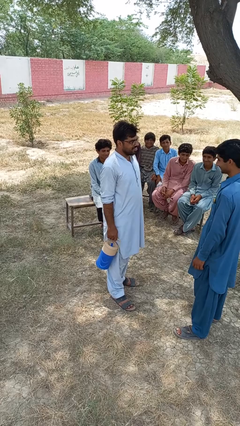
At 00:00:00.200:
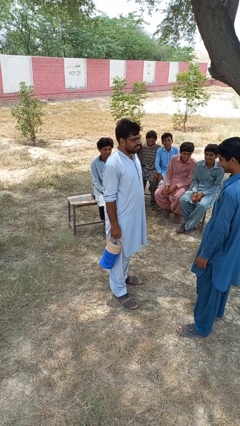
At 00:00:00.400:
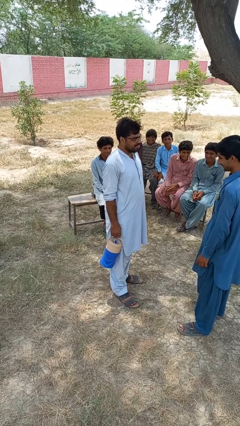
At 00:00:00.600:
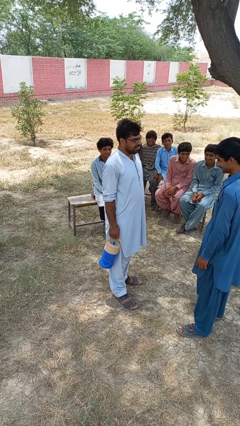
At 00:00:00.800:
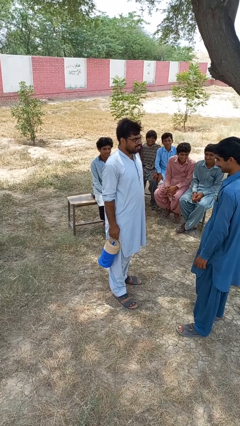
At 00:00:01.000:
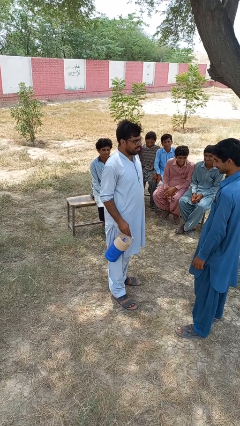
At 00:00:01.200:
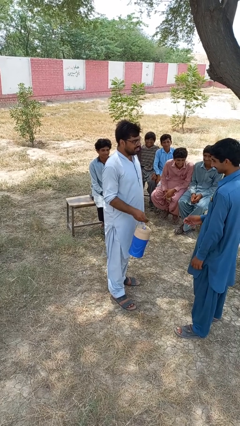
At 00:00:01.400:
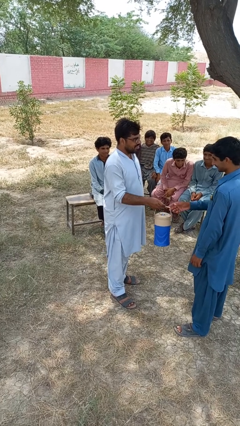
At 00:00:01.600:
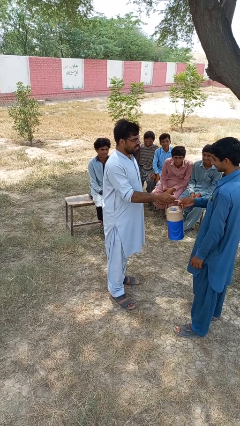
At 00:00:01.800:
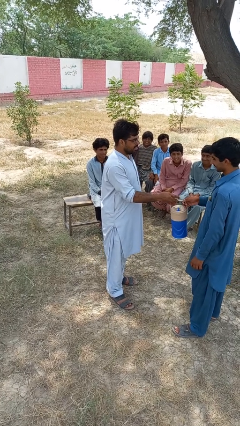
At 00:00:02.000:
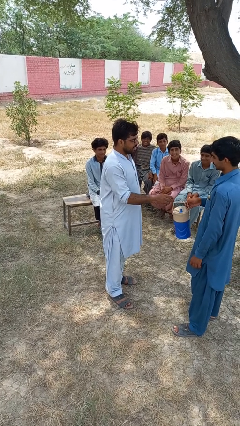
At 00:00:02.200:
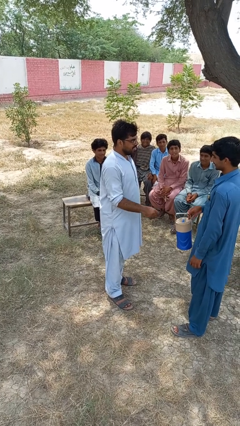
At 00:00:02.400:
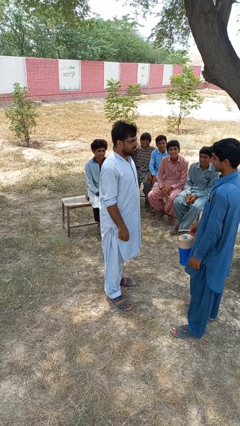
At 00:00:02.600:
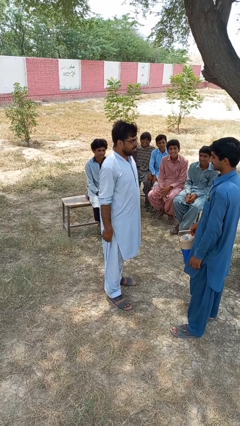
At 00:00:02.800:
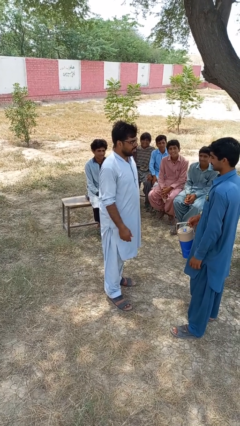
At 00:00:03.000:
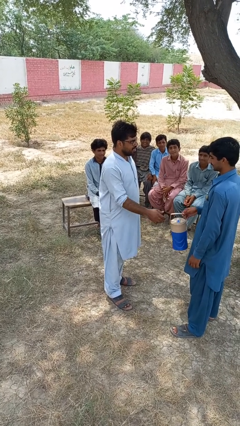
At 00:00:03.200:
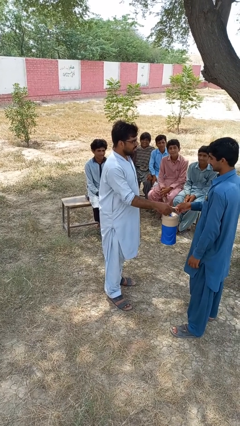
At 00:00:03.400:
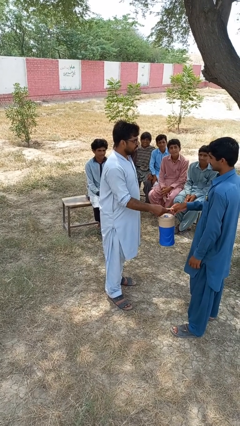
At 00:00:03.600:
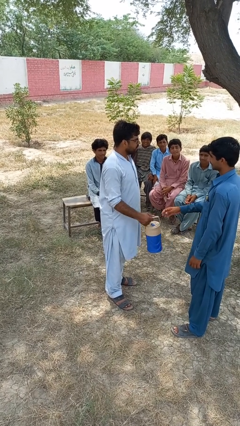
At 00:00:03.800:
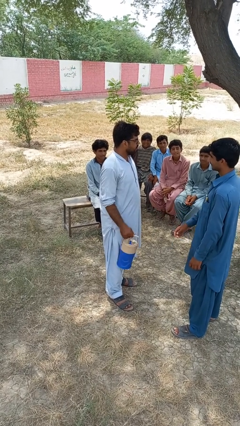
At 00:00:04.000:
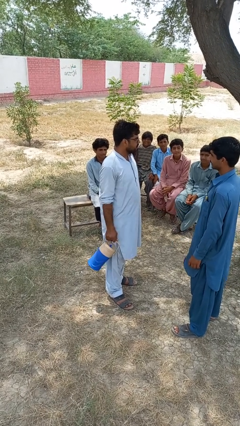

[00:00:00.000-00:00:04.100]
person transfers object to person

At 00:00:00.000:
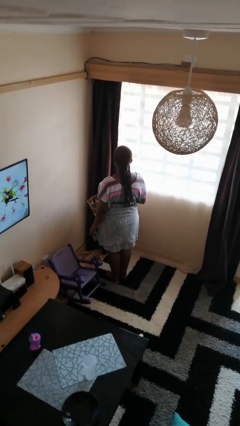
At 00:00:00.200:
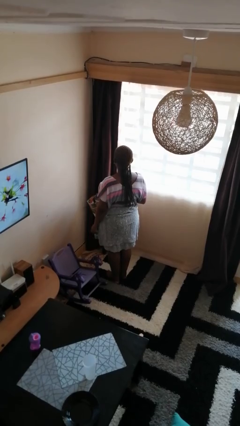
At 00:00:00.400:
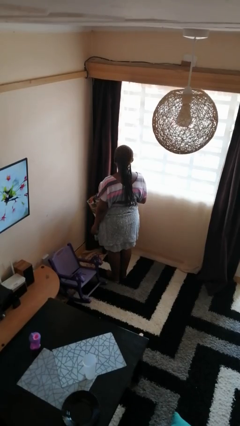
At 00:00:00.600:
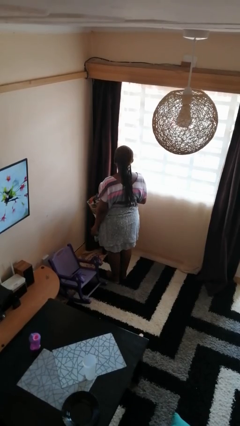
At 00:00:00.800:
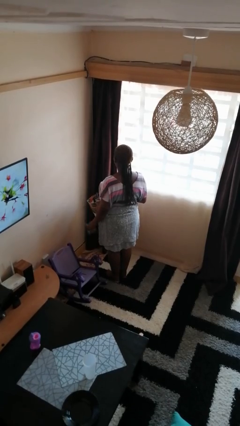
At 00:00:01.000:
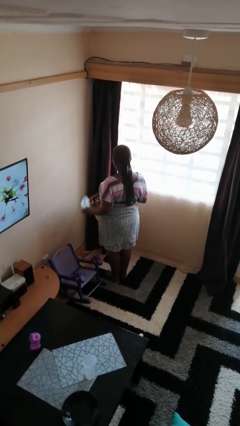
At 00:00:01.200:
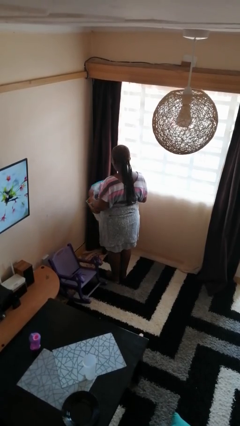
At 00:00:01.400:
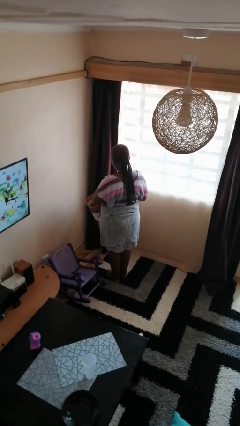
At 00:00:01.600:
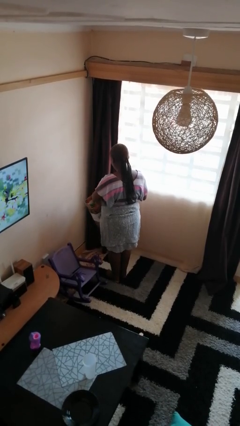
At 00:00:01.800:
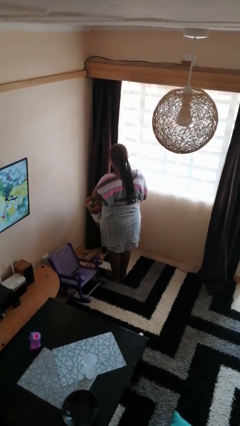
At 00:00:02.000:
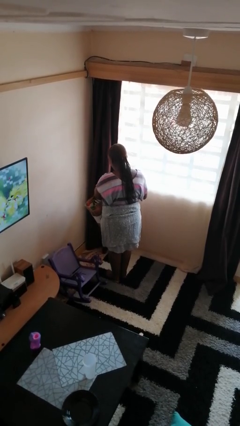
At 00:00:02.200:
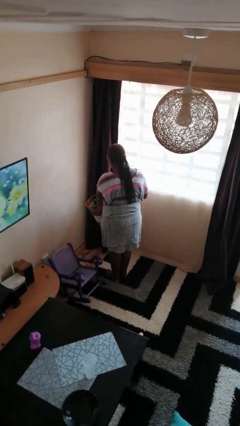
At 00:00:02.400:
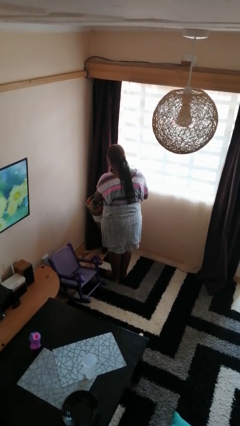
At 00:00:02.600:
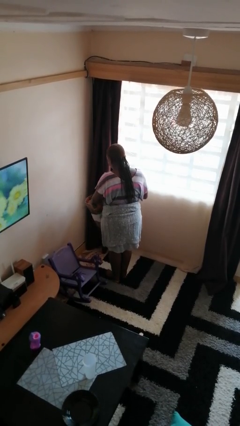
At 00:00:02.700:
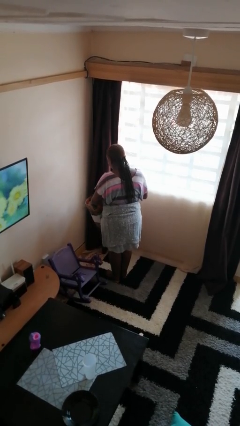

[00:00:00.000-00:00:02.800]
person puts object into bag

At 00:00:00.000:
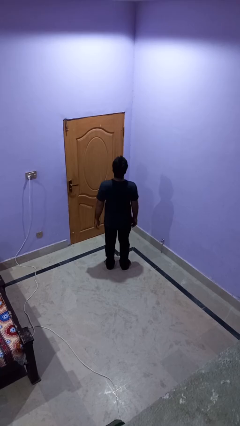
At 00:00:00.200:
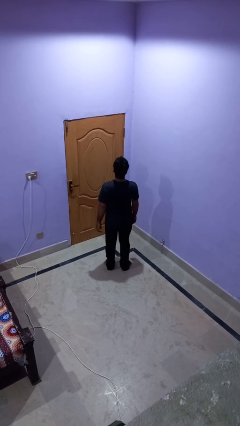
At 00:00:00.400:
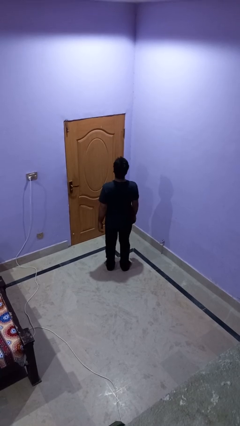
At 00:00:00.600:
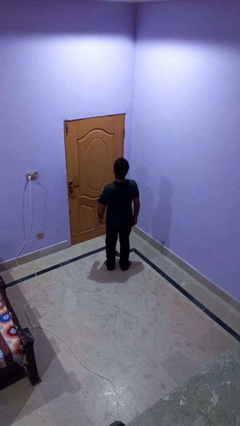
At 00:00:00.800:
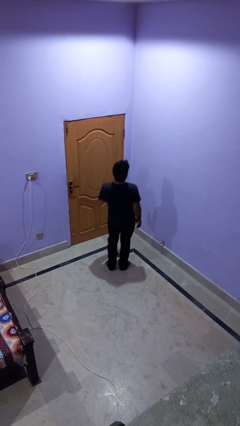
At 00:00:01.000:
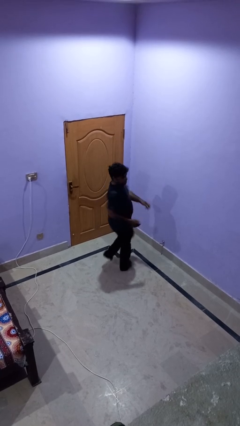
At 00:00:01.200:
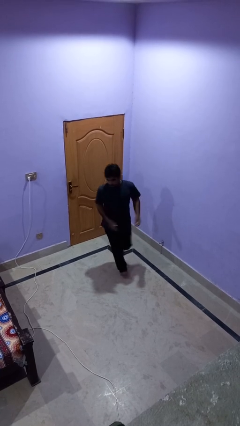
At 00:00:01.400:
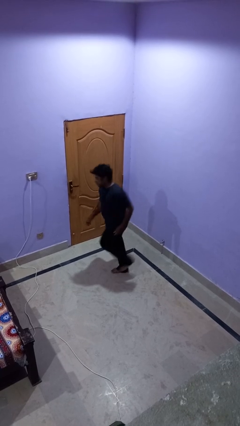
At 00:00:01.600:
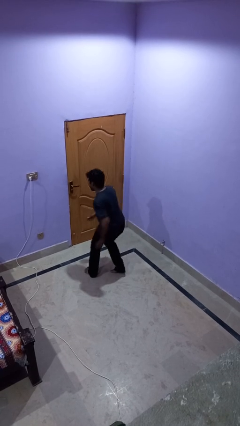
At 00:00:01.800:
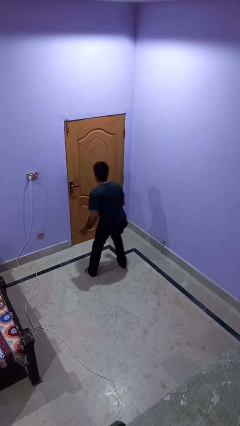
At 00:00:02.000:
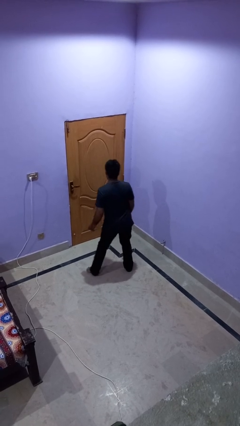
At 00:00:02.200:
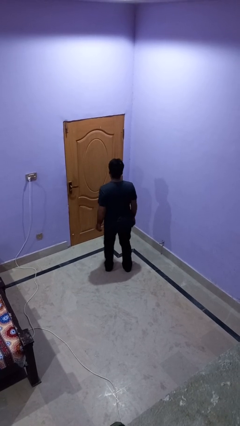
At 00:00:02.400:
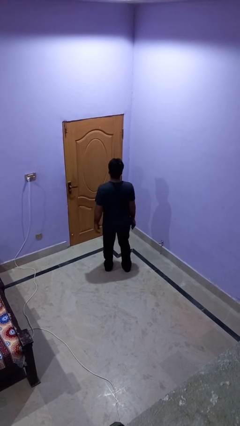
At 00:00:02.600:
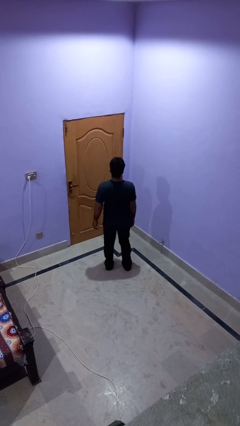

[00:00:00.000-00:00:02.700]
person twirls

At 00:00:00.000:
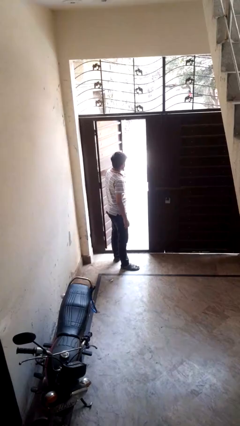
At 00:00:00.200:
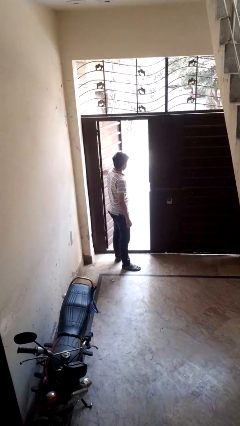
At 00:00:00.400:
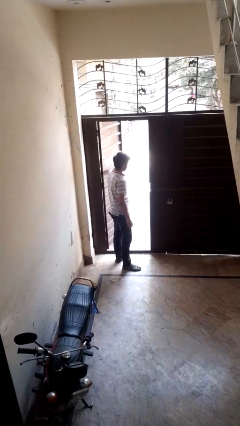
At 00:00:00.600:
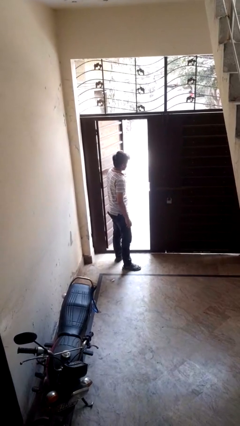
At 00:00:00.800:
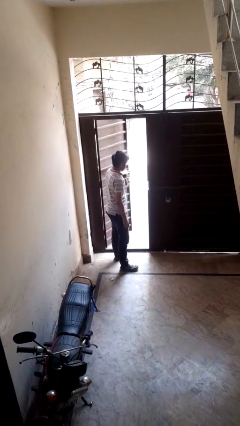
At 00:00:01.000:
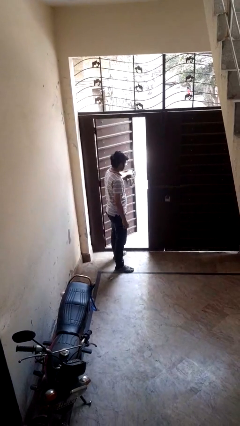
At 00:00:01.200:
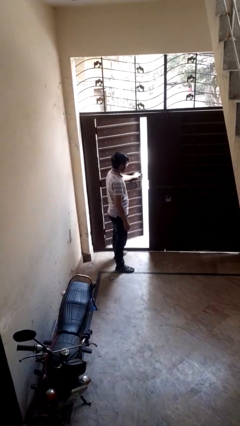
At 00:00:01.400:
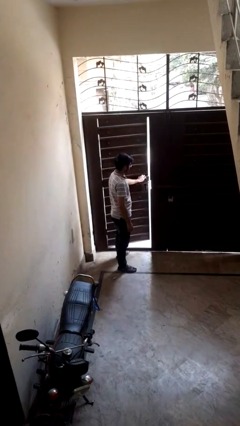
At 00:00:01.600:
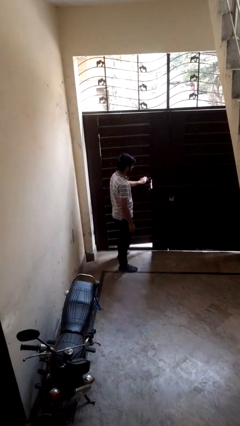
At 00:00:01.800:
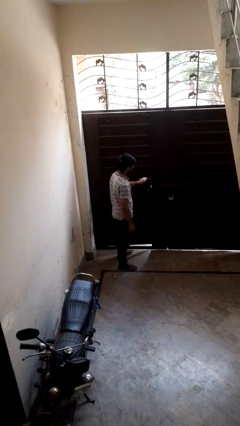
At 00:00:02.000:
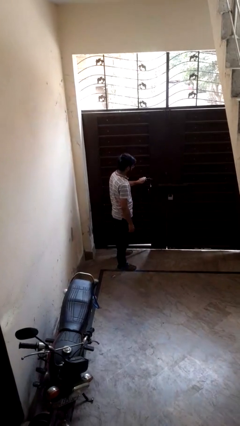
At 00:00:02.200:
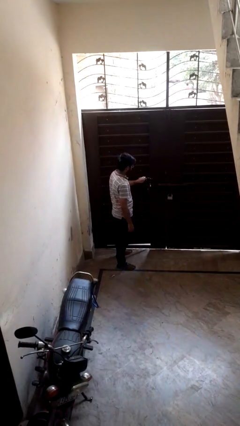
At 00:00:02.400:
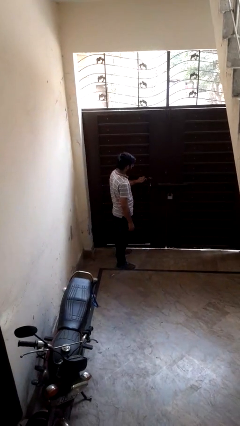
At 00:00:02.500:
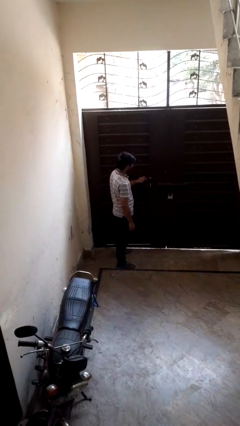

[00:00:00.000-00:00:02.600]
person closes facility door

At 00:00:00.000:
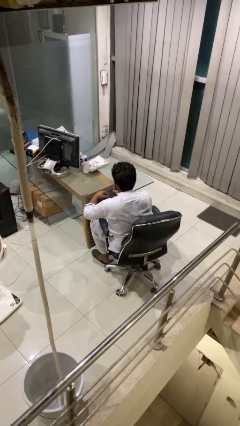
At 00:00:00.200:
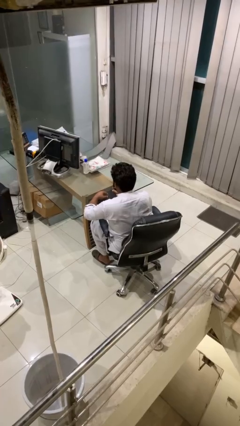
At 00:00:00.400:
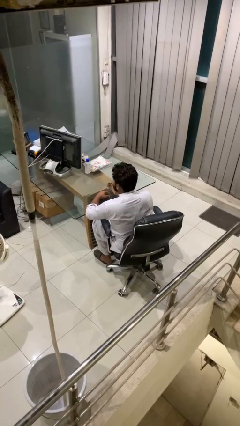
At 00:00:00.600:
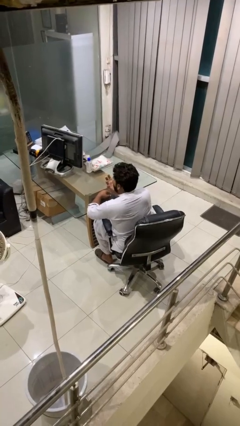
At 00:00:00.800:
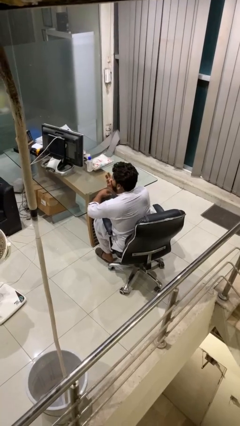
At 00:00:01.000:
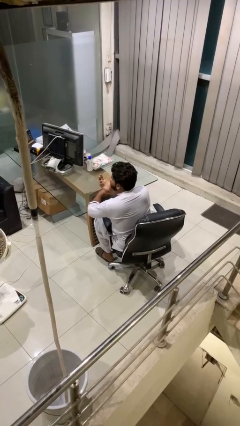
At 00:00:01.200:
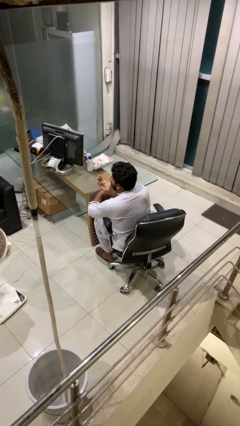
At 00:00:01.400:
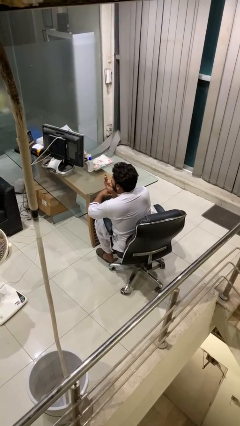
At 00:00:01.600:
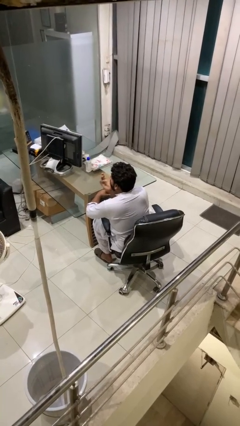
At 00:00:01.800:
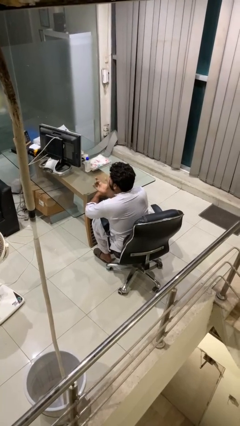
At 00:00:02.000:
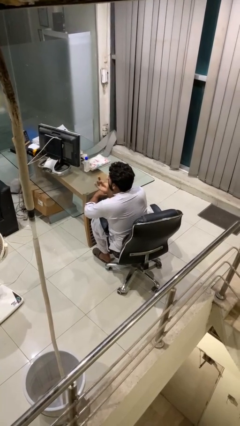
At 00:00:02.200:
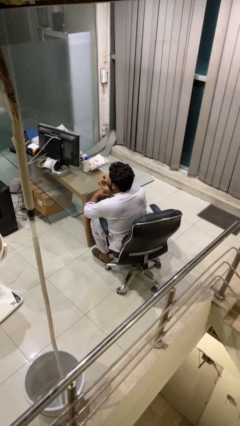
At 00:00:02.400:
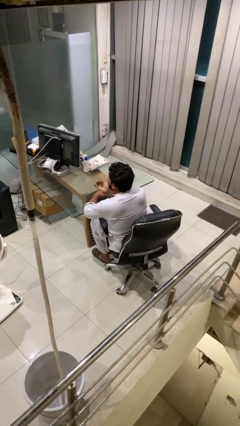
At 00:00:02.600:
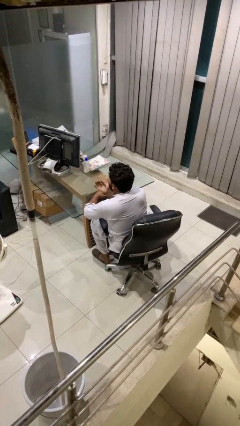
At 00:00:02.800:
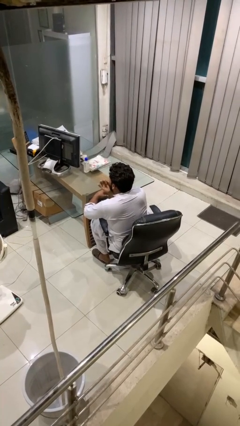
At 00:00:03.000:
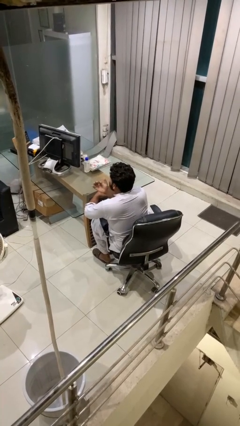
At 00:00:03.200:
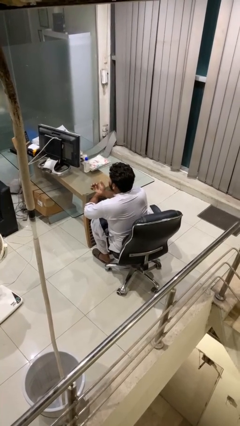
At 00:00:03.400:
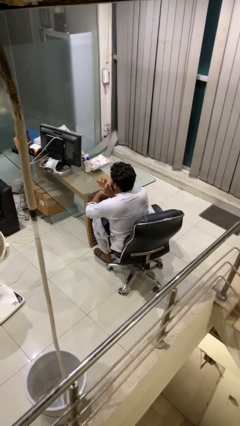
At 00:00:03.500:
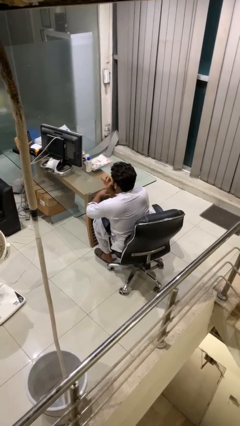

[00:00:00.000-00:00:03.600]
person licks fingers

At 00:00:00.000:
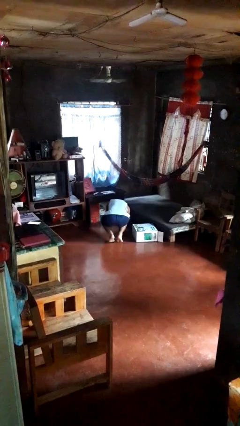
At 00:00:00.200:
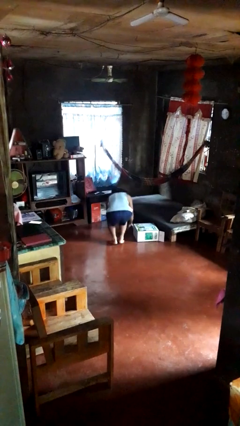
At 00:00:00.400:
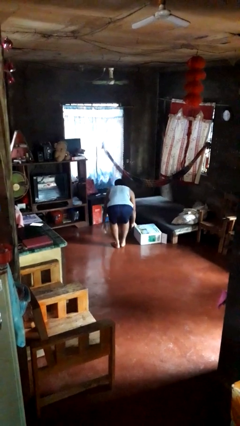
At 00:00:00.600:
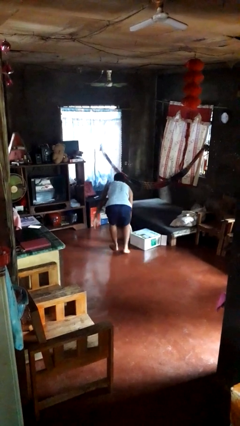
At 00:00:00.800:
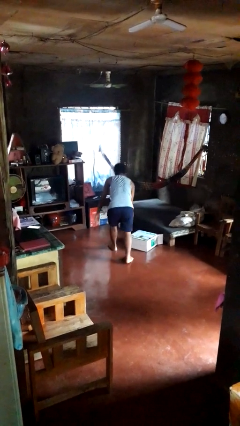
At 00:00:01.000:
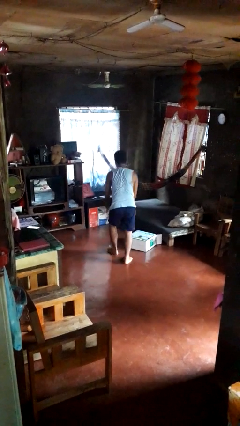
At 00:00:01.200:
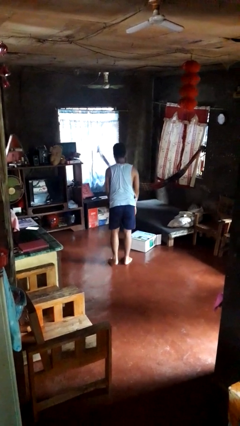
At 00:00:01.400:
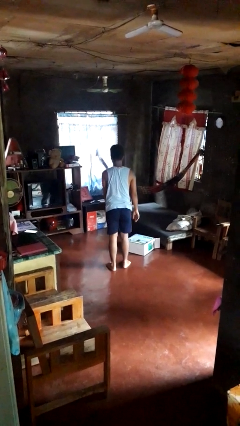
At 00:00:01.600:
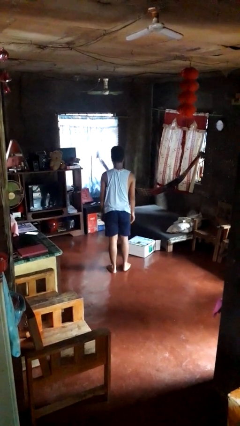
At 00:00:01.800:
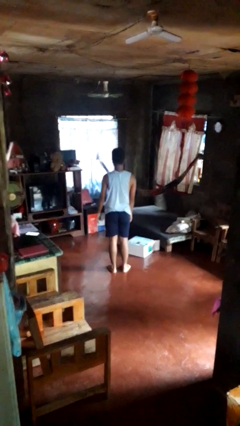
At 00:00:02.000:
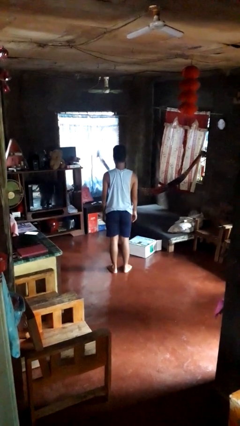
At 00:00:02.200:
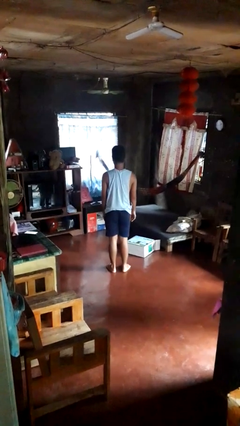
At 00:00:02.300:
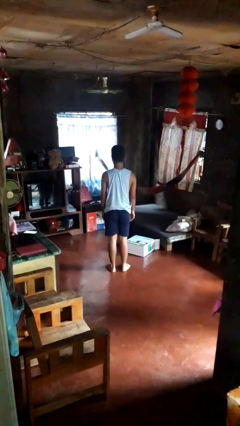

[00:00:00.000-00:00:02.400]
person stands up from floor
